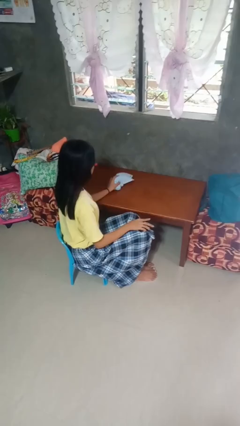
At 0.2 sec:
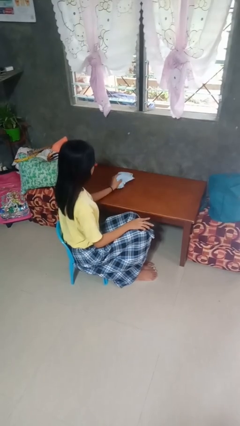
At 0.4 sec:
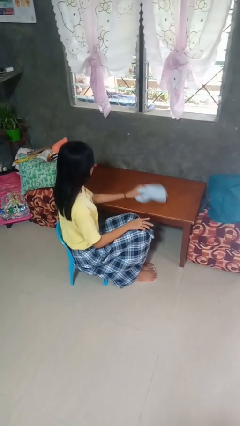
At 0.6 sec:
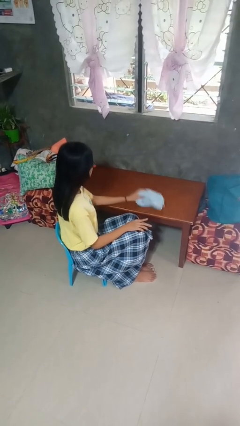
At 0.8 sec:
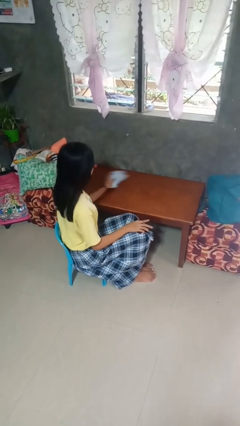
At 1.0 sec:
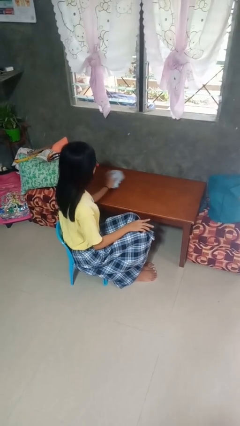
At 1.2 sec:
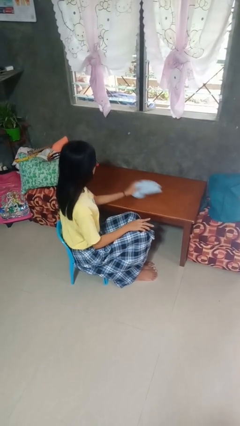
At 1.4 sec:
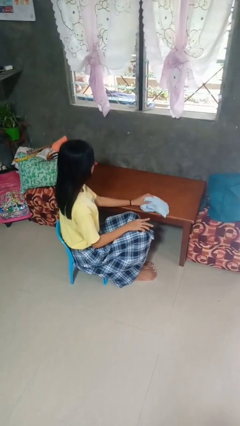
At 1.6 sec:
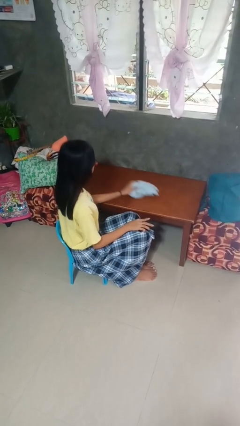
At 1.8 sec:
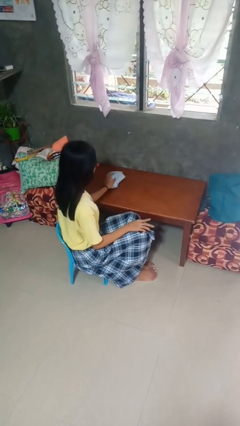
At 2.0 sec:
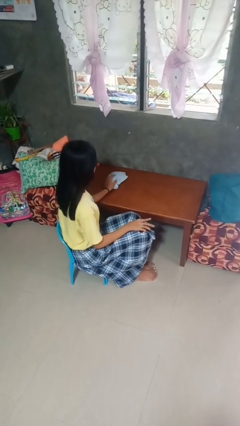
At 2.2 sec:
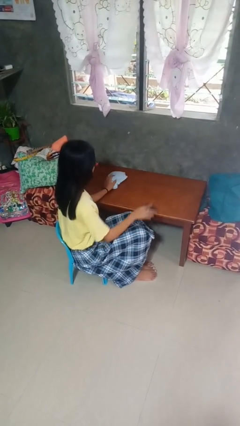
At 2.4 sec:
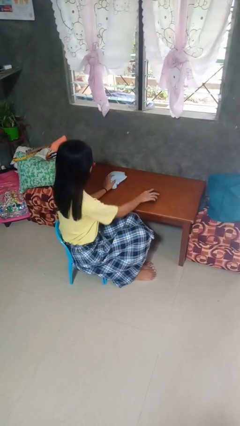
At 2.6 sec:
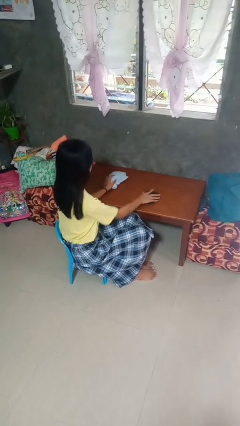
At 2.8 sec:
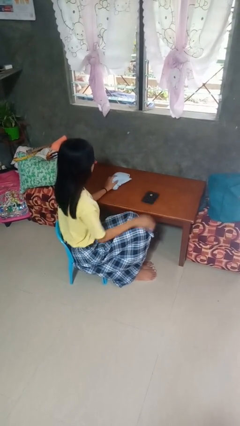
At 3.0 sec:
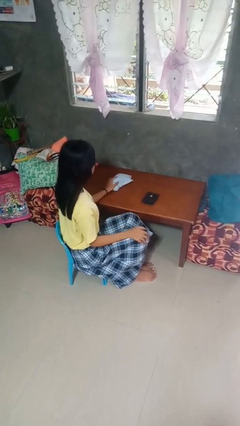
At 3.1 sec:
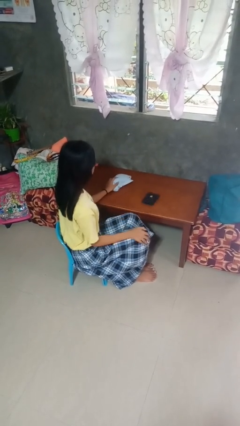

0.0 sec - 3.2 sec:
person cleans table with rag

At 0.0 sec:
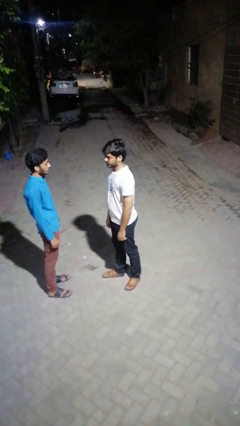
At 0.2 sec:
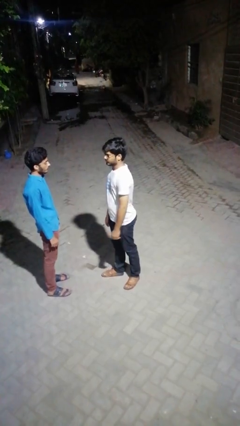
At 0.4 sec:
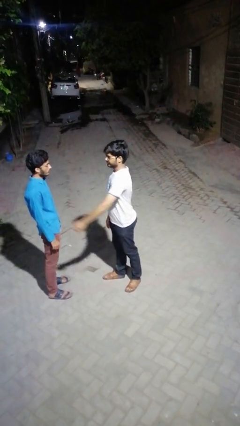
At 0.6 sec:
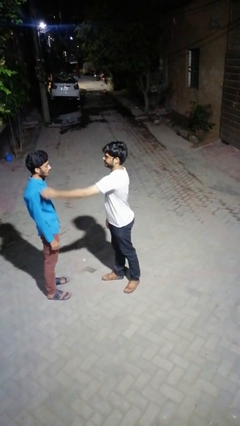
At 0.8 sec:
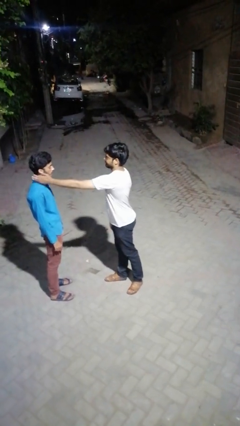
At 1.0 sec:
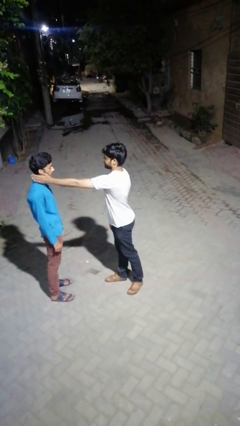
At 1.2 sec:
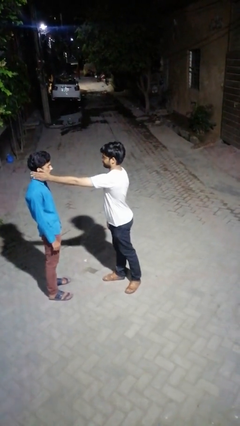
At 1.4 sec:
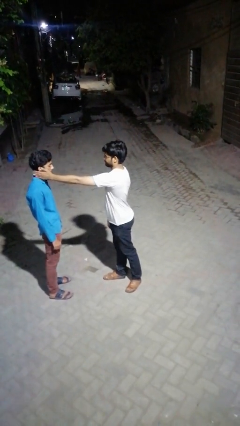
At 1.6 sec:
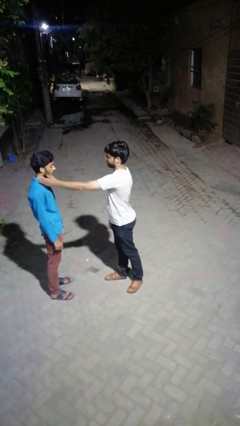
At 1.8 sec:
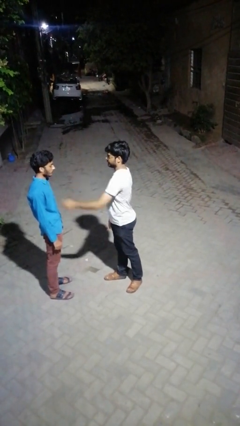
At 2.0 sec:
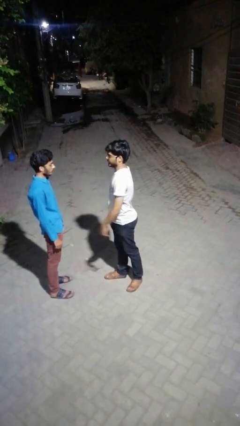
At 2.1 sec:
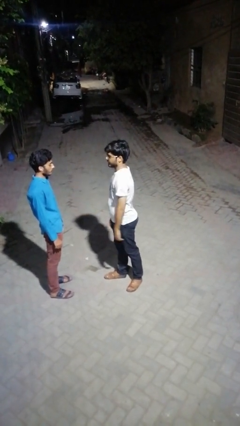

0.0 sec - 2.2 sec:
person touches face of person

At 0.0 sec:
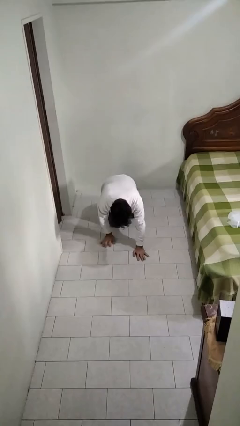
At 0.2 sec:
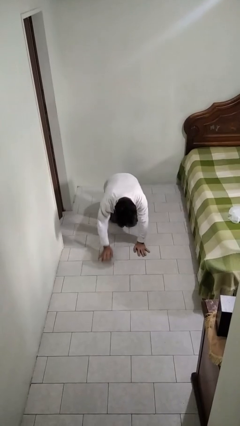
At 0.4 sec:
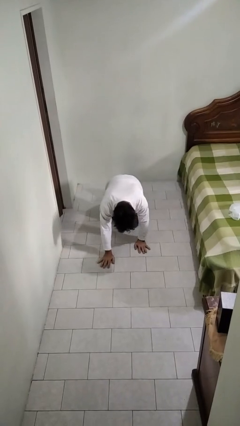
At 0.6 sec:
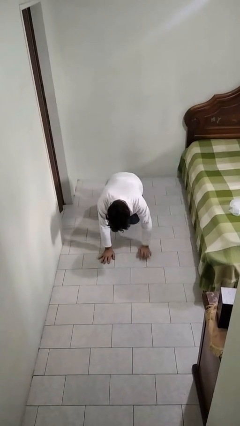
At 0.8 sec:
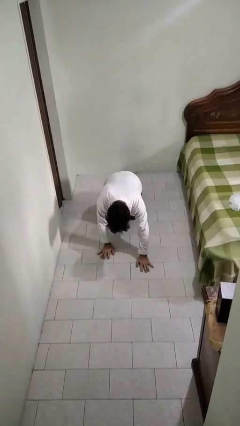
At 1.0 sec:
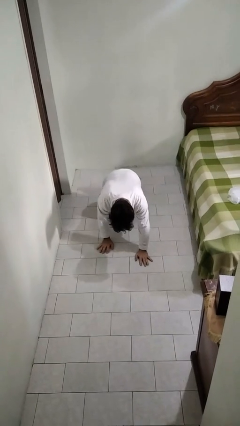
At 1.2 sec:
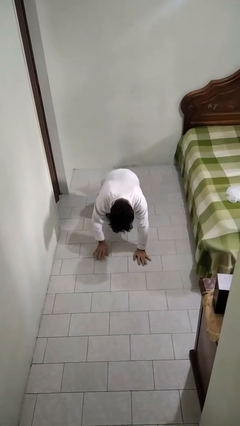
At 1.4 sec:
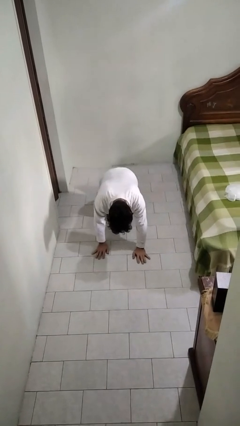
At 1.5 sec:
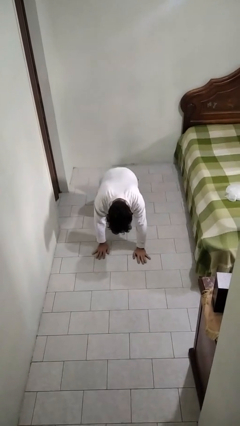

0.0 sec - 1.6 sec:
person crawls

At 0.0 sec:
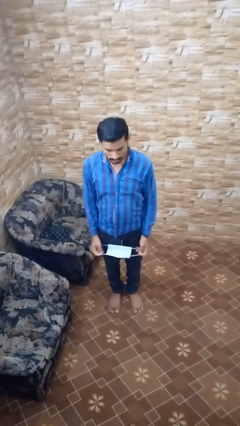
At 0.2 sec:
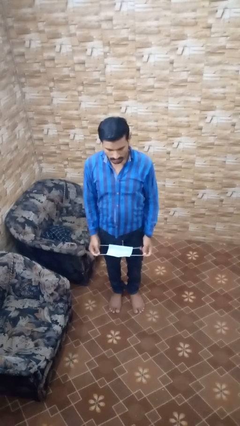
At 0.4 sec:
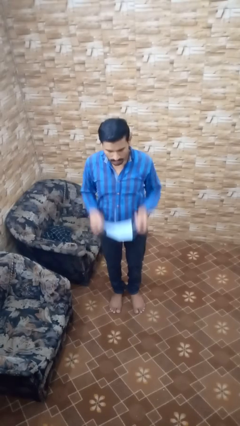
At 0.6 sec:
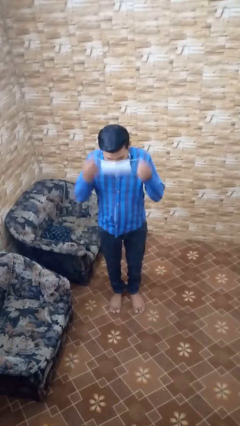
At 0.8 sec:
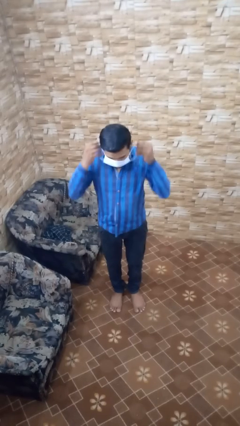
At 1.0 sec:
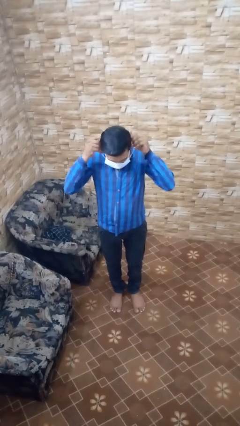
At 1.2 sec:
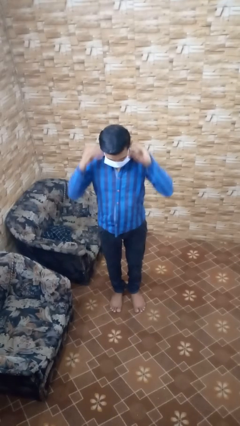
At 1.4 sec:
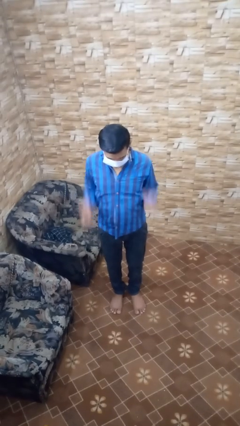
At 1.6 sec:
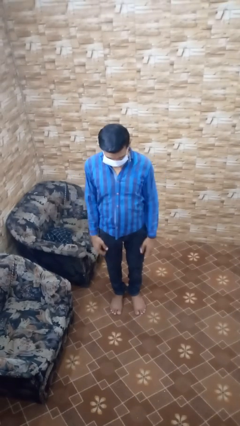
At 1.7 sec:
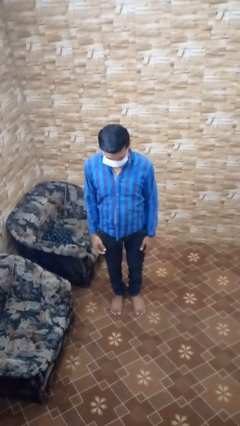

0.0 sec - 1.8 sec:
person puts on facemask

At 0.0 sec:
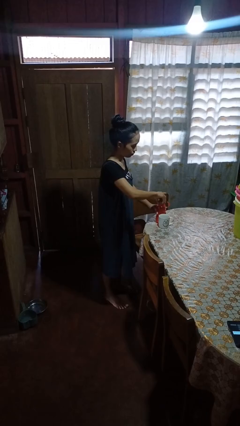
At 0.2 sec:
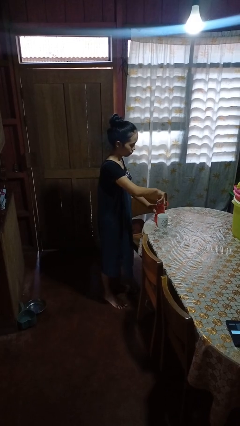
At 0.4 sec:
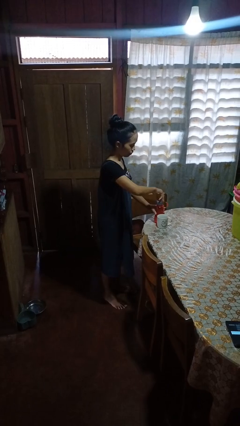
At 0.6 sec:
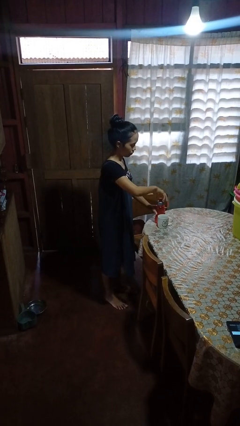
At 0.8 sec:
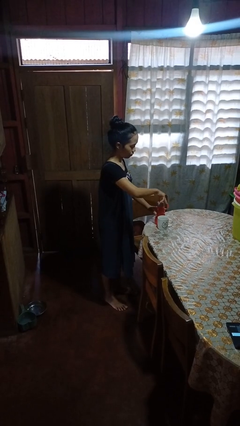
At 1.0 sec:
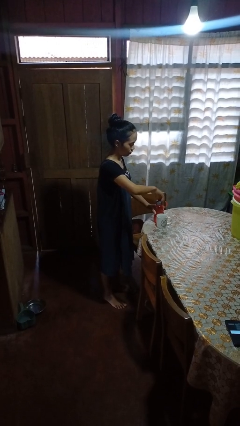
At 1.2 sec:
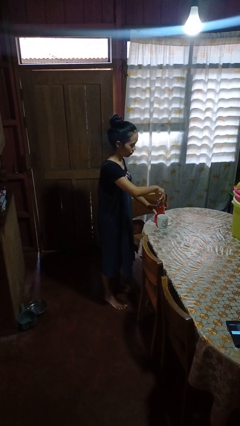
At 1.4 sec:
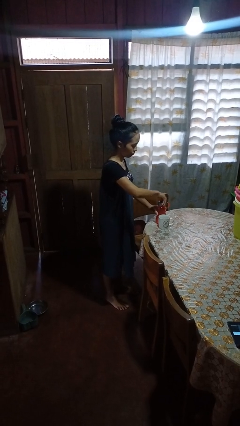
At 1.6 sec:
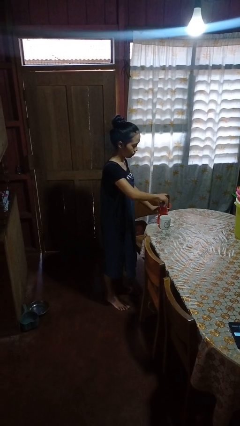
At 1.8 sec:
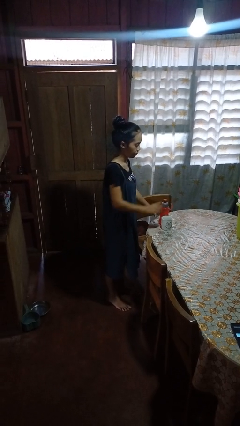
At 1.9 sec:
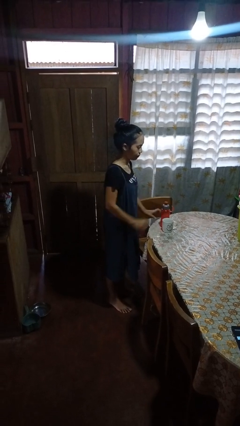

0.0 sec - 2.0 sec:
person screws lid to bottle

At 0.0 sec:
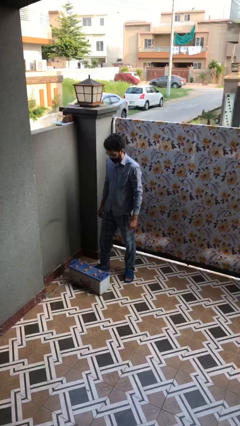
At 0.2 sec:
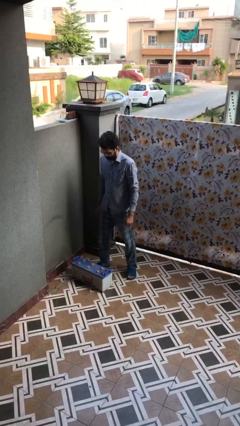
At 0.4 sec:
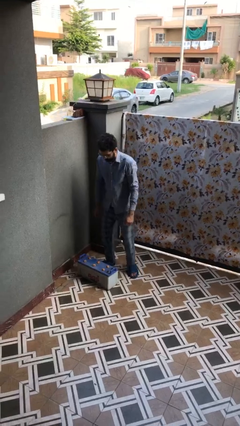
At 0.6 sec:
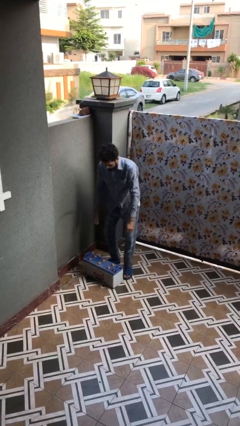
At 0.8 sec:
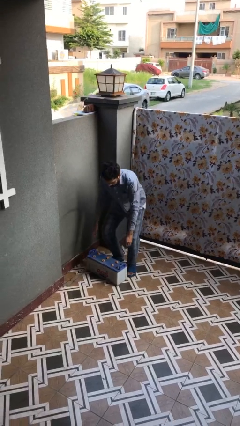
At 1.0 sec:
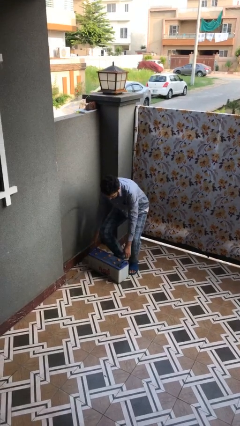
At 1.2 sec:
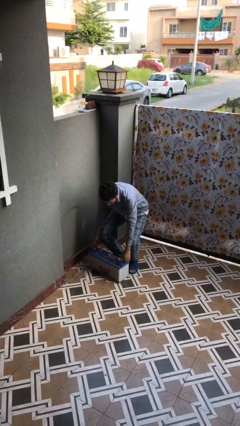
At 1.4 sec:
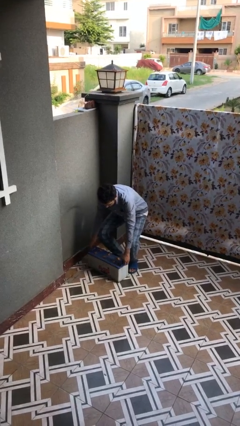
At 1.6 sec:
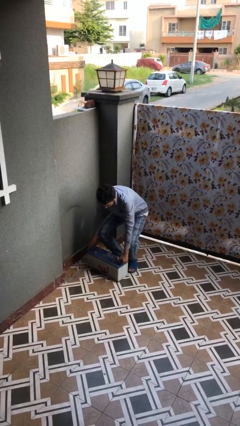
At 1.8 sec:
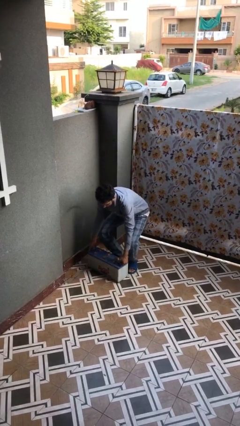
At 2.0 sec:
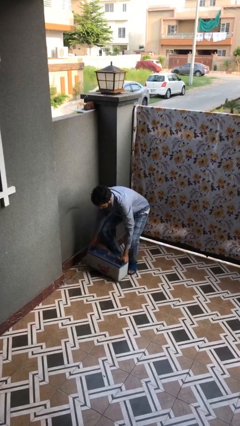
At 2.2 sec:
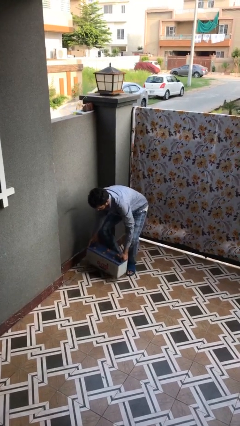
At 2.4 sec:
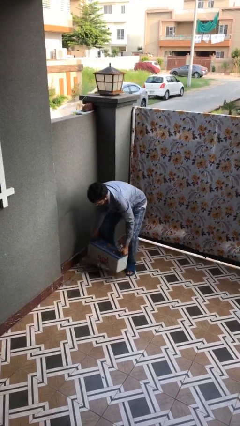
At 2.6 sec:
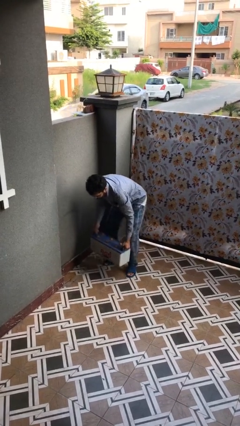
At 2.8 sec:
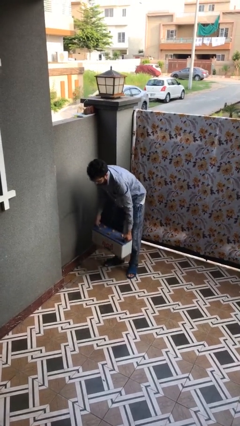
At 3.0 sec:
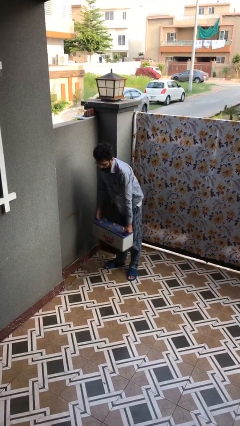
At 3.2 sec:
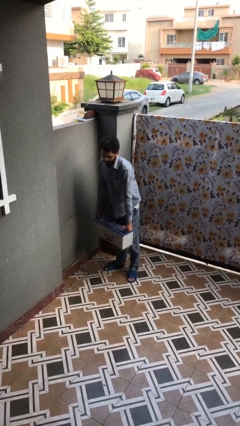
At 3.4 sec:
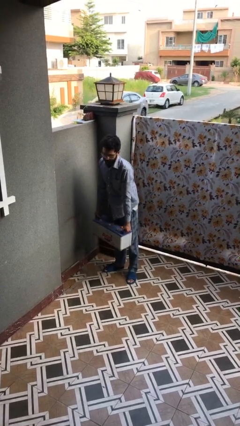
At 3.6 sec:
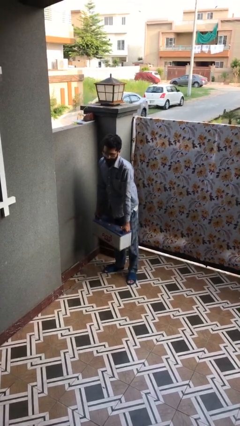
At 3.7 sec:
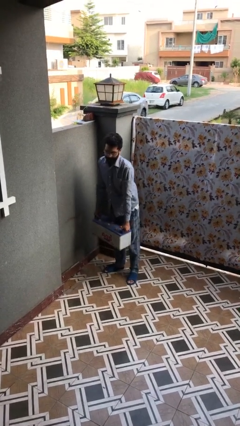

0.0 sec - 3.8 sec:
person picks up object from floor

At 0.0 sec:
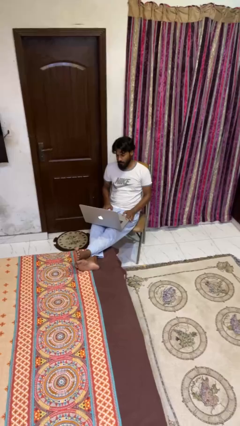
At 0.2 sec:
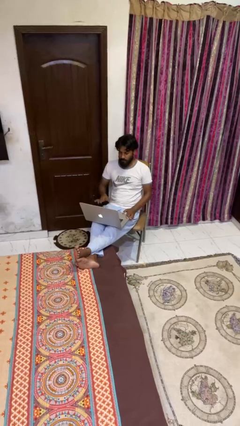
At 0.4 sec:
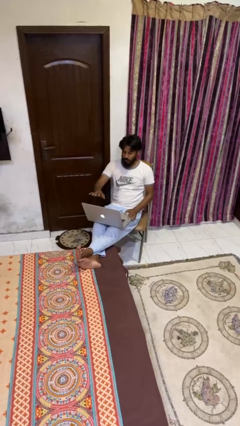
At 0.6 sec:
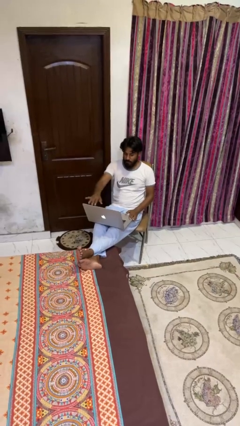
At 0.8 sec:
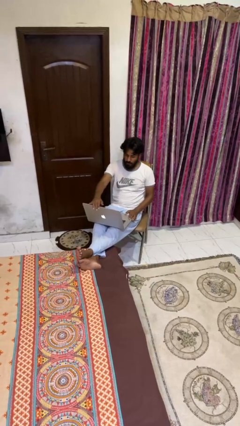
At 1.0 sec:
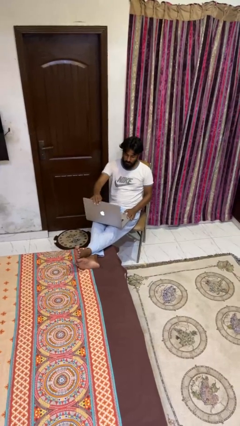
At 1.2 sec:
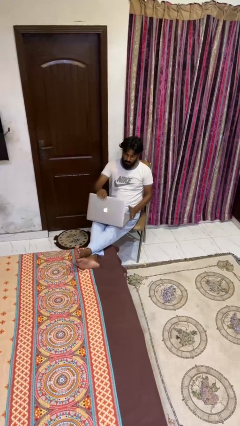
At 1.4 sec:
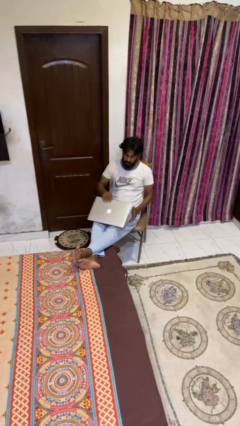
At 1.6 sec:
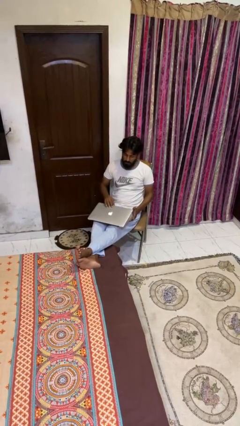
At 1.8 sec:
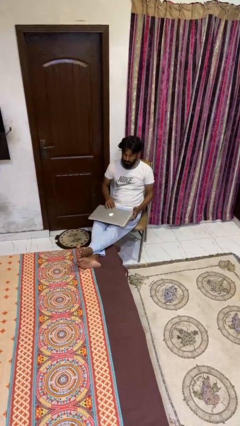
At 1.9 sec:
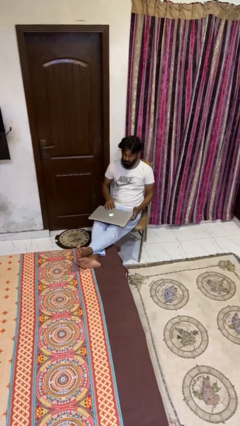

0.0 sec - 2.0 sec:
person closes laptop

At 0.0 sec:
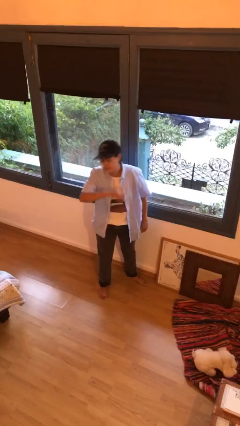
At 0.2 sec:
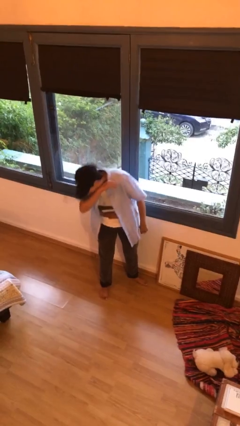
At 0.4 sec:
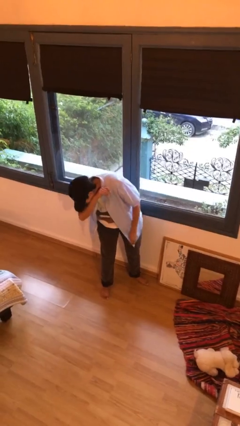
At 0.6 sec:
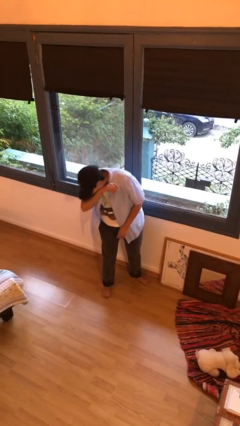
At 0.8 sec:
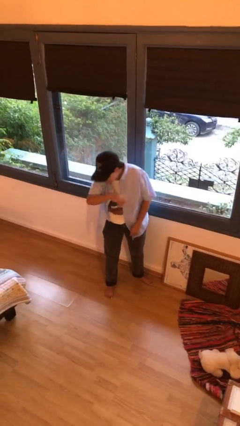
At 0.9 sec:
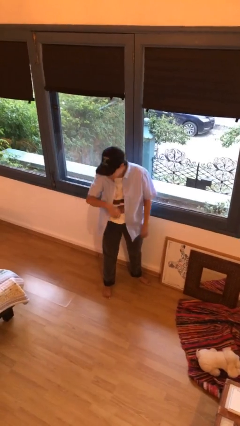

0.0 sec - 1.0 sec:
person sneezes into arm
